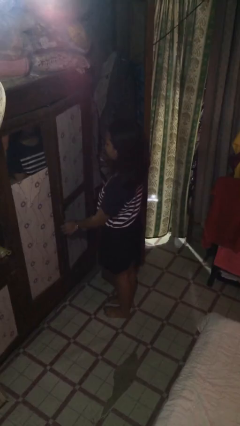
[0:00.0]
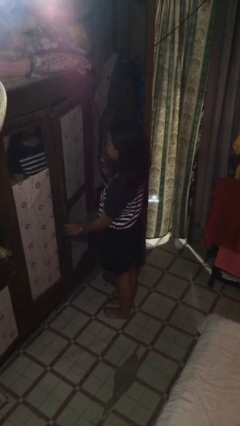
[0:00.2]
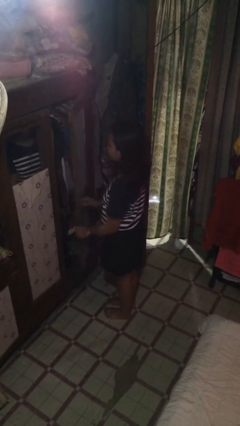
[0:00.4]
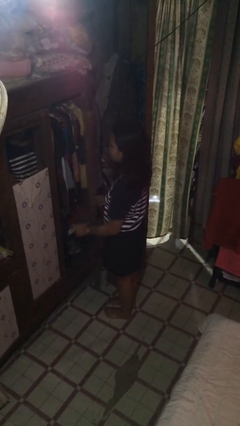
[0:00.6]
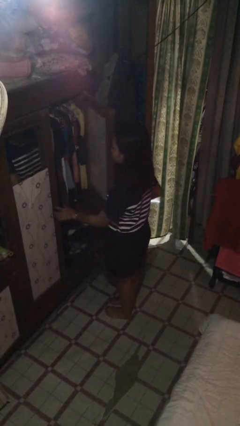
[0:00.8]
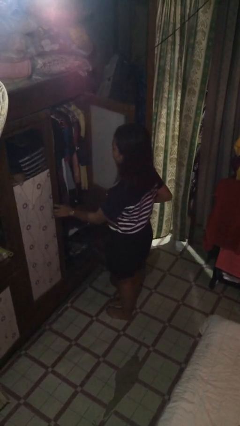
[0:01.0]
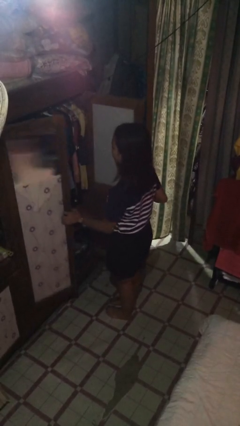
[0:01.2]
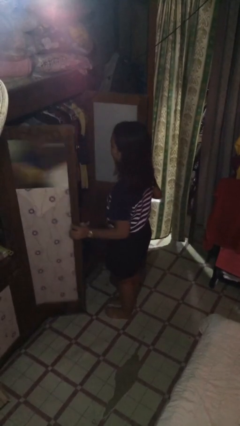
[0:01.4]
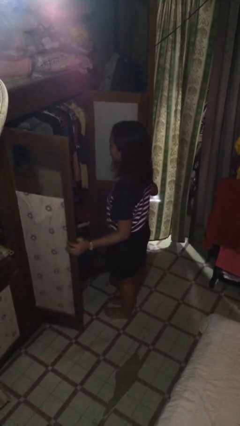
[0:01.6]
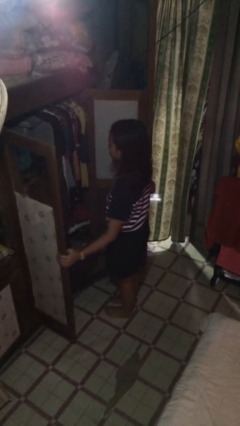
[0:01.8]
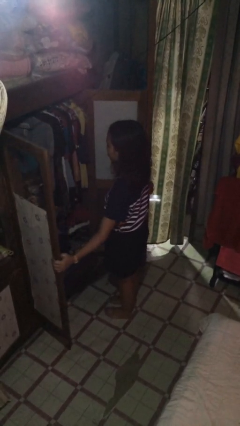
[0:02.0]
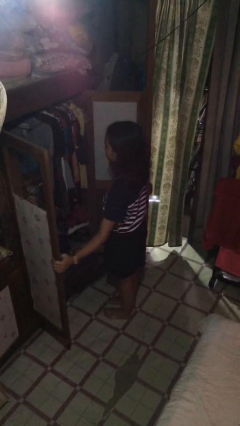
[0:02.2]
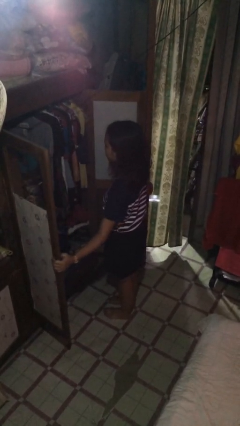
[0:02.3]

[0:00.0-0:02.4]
person opens closet door

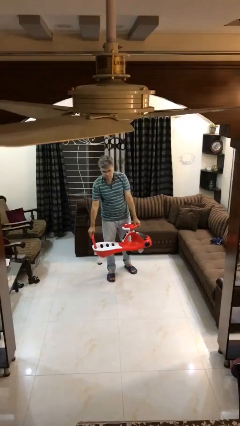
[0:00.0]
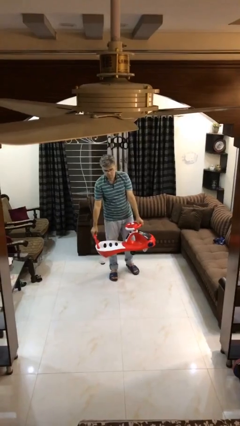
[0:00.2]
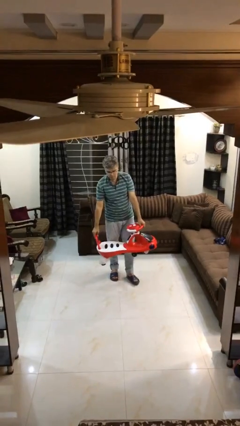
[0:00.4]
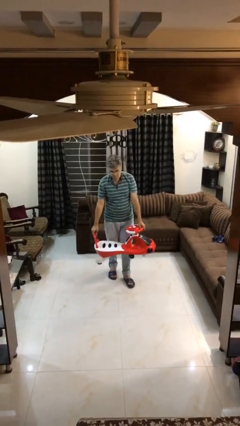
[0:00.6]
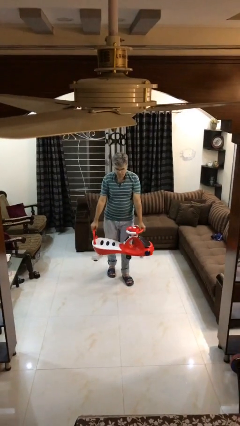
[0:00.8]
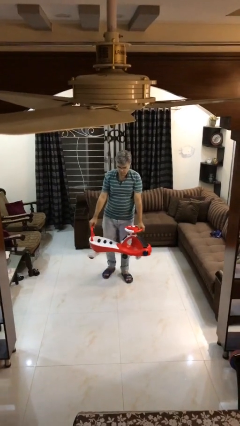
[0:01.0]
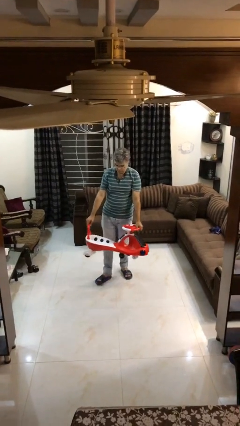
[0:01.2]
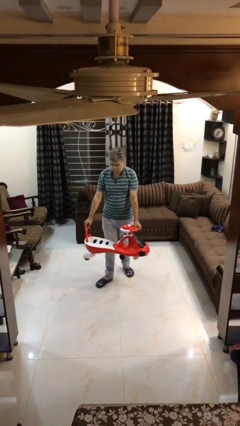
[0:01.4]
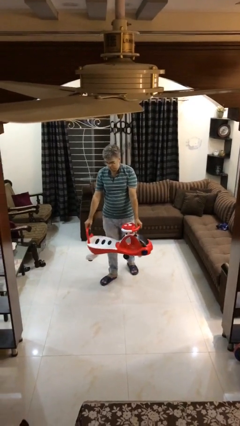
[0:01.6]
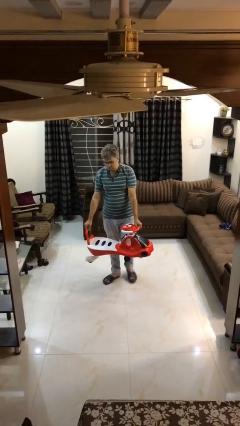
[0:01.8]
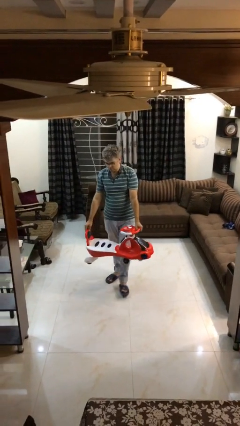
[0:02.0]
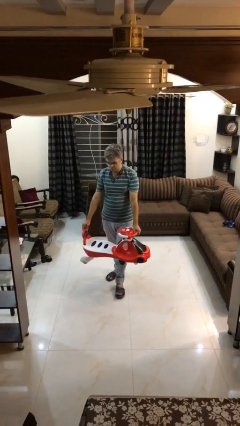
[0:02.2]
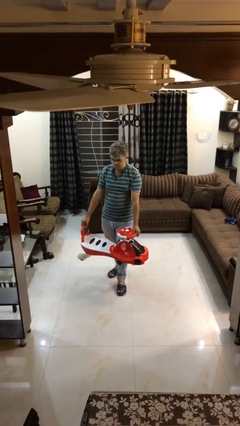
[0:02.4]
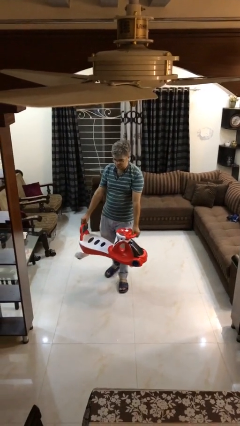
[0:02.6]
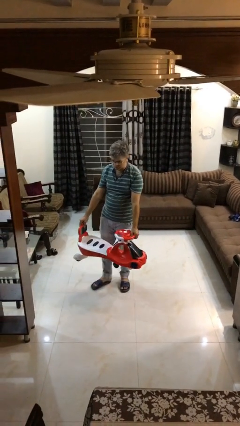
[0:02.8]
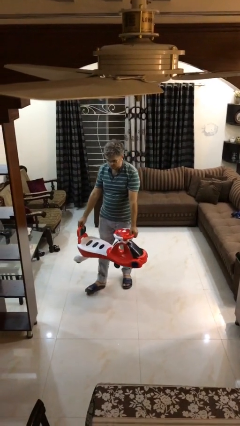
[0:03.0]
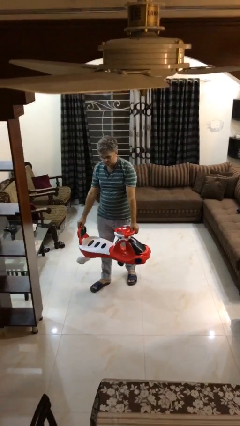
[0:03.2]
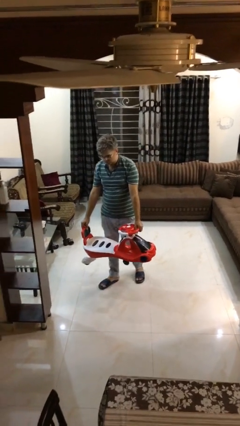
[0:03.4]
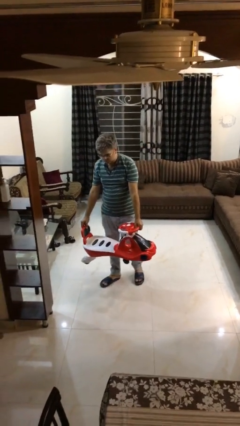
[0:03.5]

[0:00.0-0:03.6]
person carries heavy object

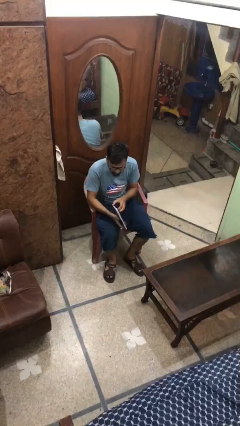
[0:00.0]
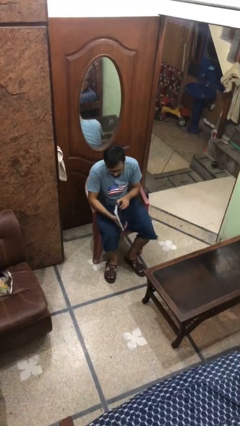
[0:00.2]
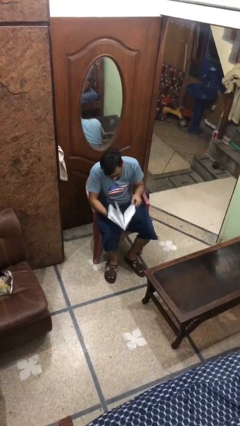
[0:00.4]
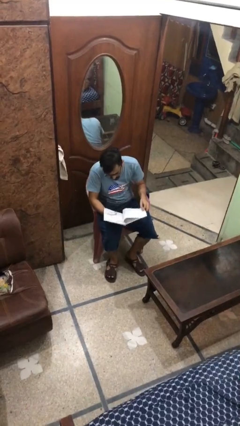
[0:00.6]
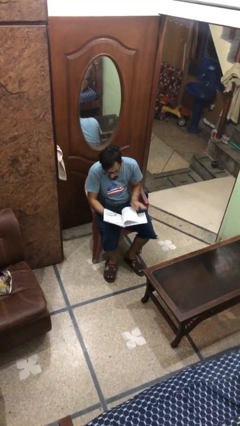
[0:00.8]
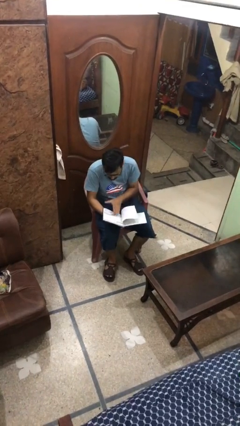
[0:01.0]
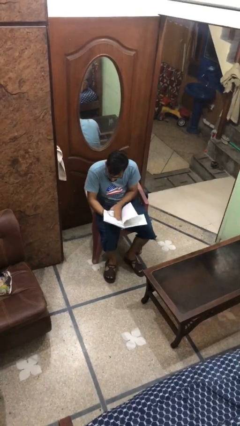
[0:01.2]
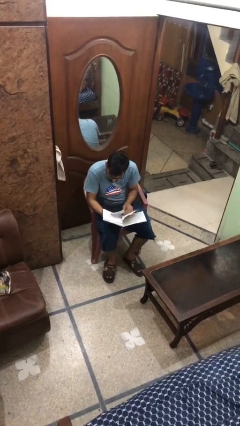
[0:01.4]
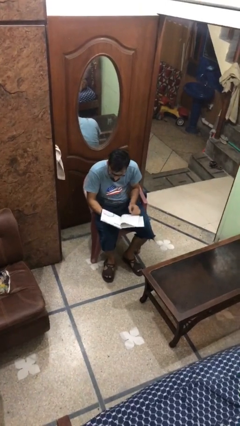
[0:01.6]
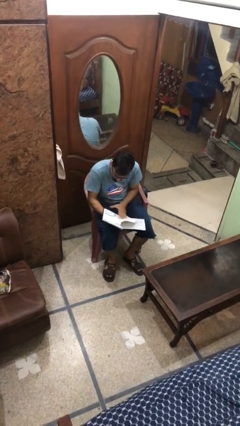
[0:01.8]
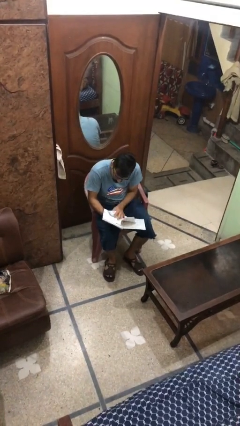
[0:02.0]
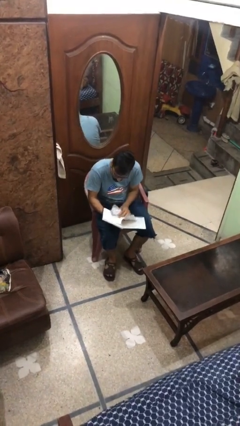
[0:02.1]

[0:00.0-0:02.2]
person reads document

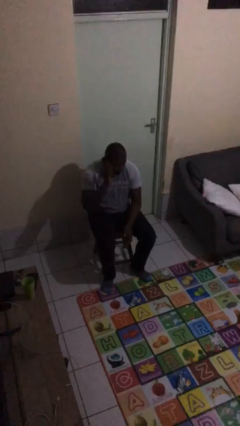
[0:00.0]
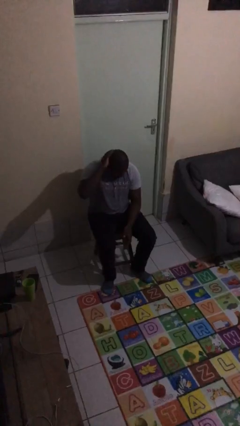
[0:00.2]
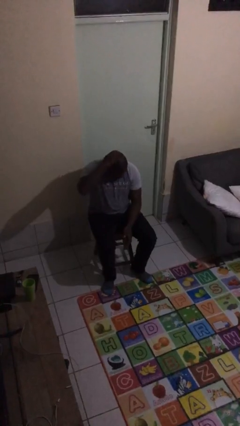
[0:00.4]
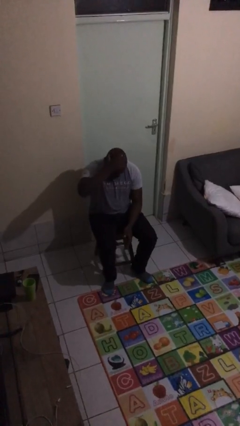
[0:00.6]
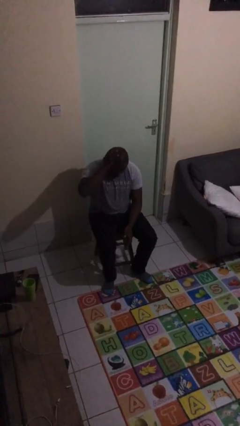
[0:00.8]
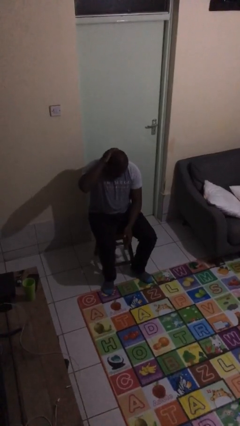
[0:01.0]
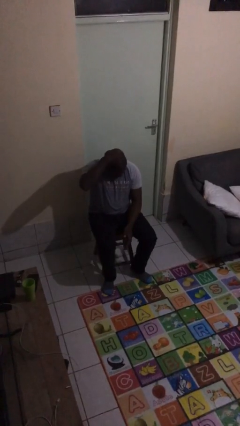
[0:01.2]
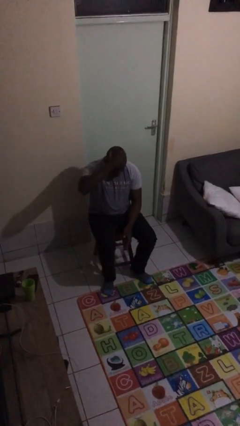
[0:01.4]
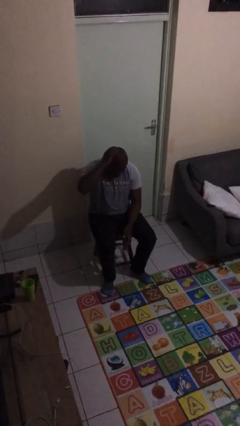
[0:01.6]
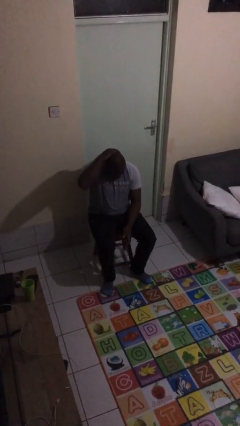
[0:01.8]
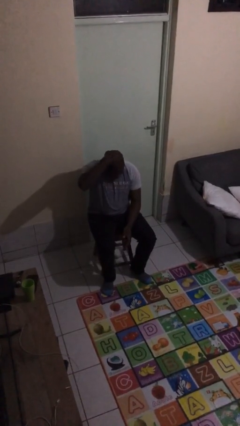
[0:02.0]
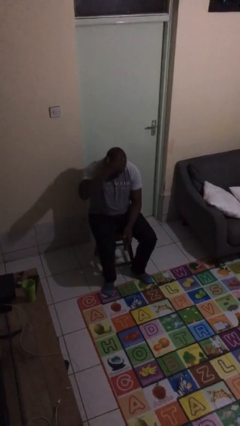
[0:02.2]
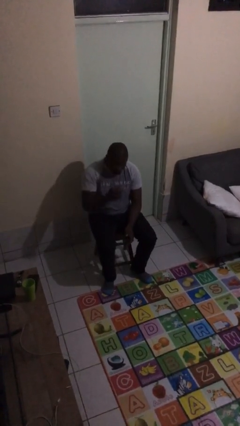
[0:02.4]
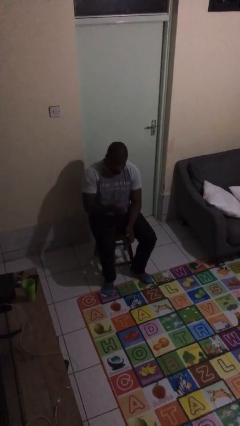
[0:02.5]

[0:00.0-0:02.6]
person scratches face

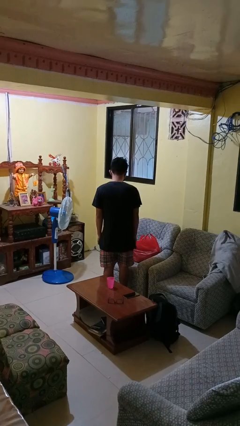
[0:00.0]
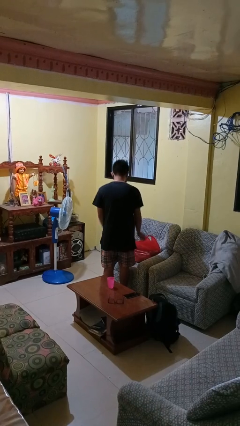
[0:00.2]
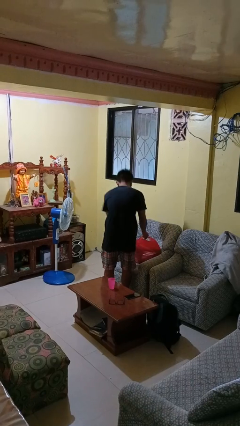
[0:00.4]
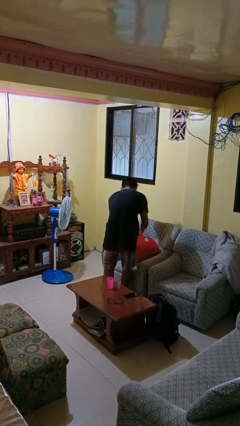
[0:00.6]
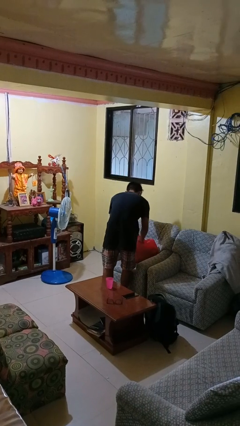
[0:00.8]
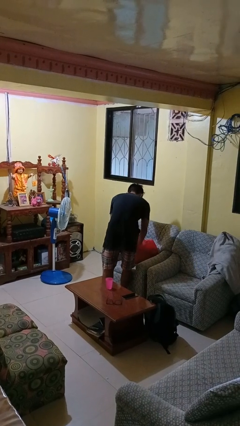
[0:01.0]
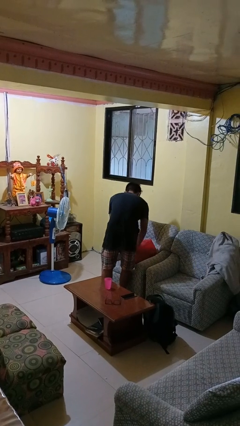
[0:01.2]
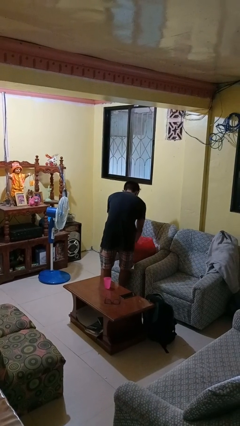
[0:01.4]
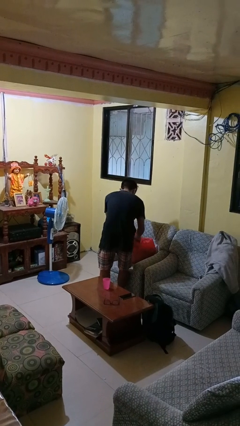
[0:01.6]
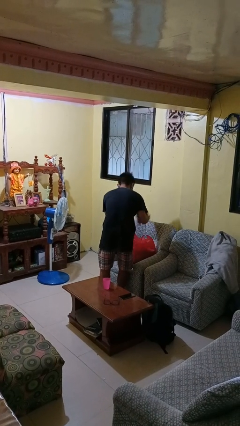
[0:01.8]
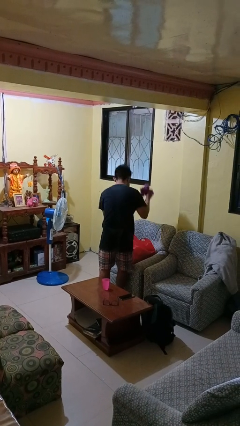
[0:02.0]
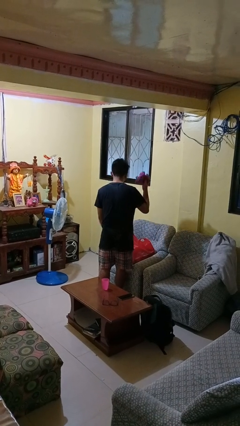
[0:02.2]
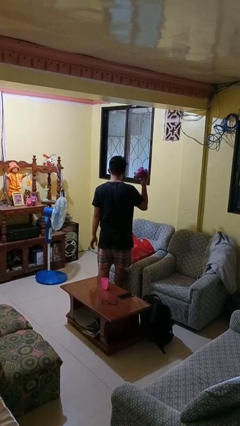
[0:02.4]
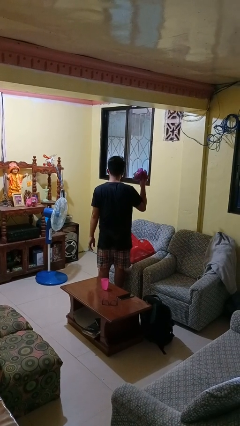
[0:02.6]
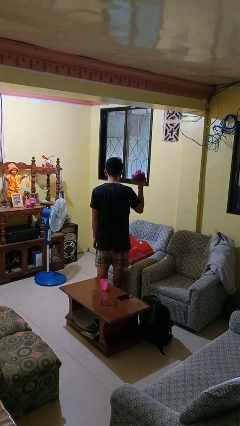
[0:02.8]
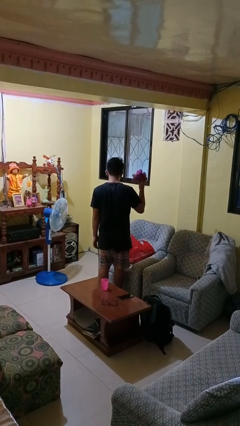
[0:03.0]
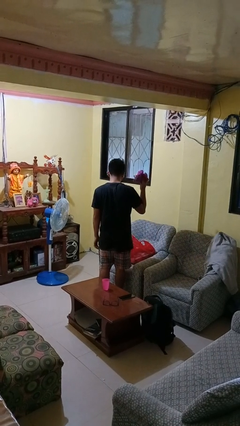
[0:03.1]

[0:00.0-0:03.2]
person takes object from bag

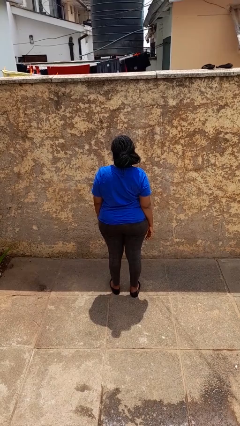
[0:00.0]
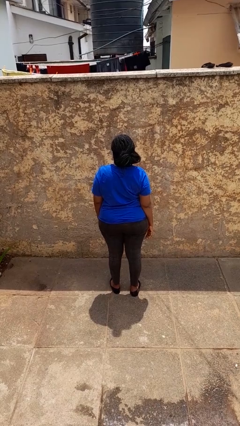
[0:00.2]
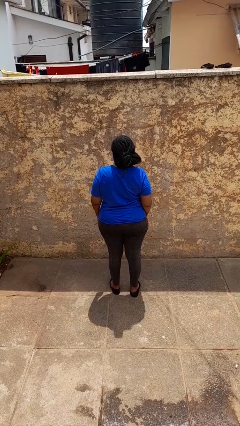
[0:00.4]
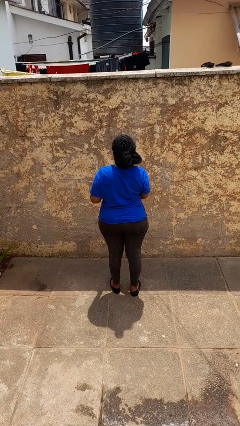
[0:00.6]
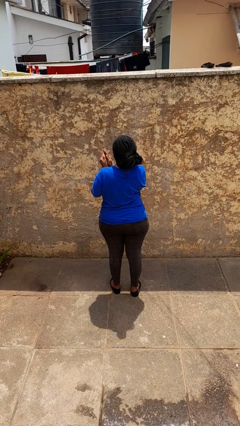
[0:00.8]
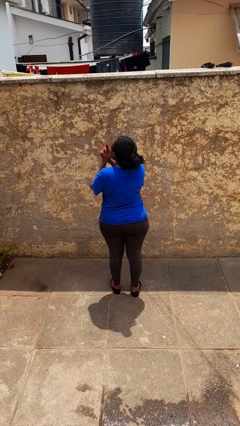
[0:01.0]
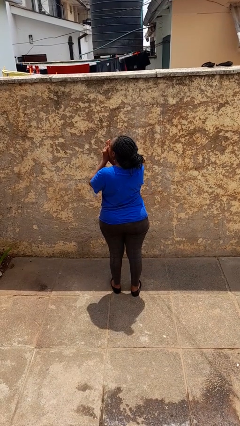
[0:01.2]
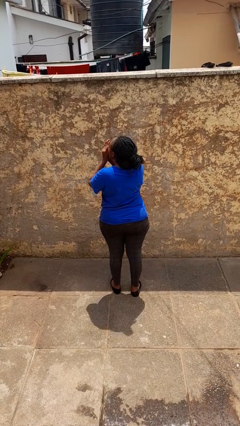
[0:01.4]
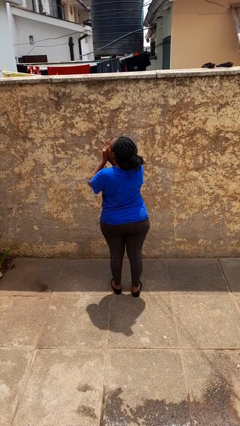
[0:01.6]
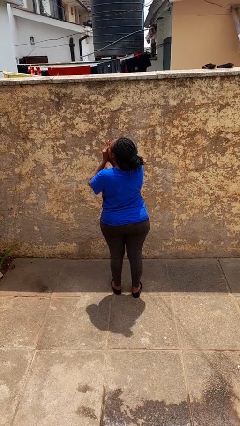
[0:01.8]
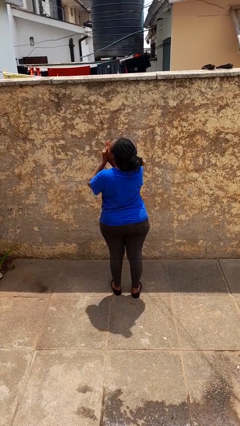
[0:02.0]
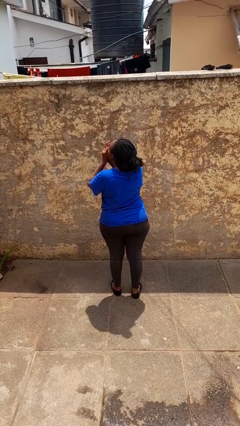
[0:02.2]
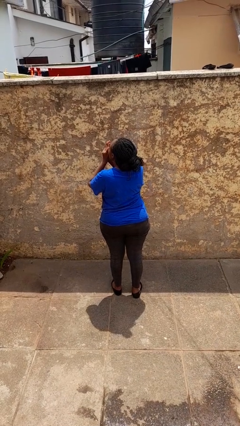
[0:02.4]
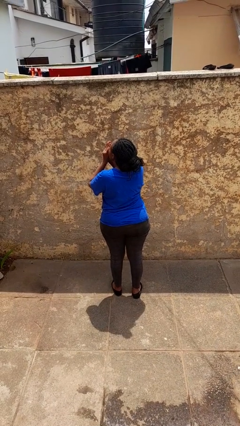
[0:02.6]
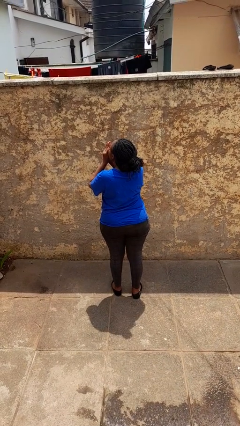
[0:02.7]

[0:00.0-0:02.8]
person blows into hands

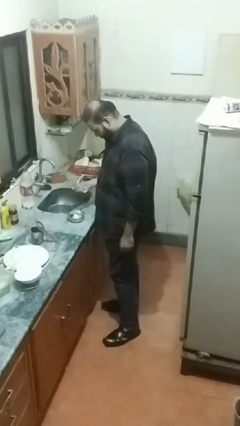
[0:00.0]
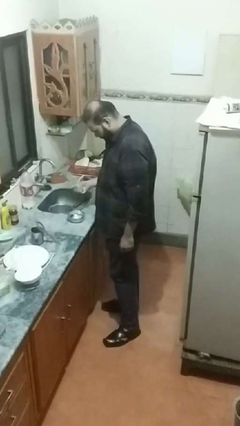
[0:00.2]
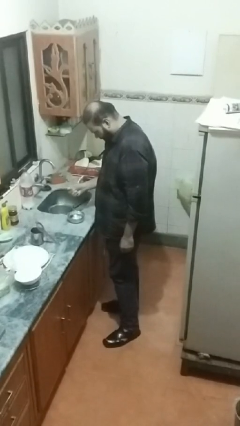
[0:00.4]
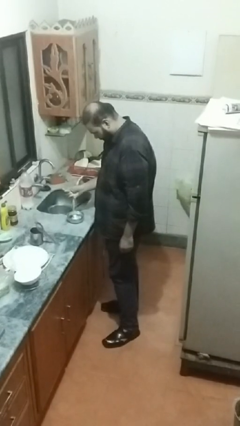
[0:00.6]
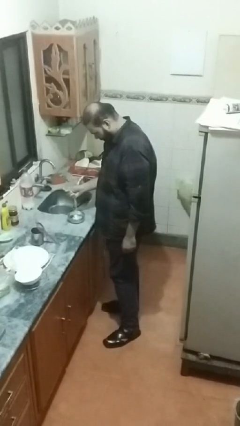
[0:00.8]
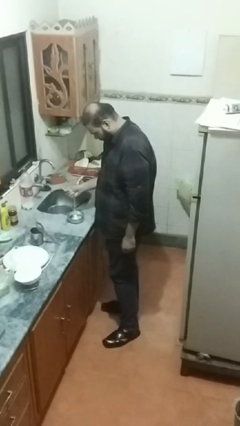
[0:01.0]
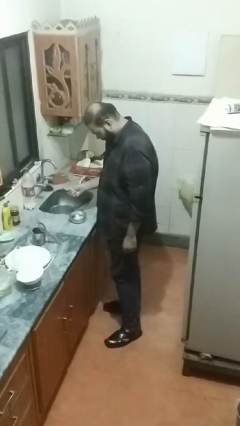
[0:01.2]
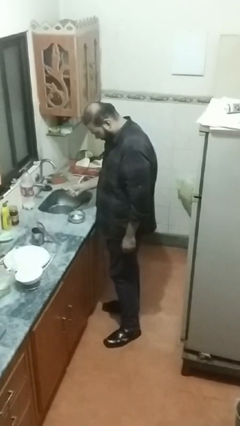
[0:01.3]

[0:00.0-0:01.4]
person pours into bowl
